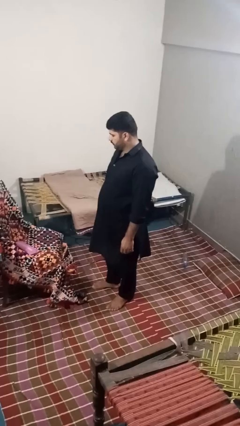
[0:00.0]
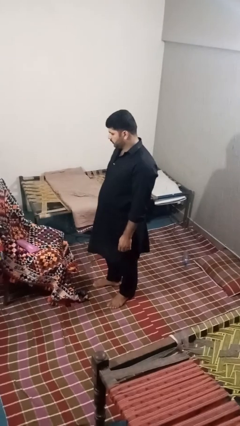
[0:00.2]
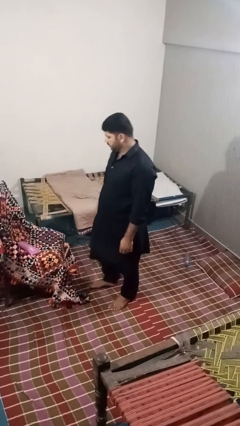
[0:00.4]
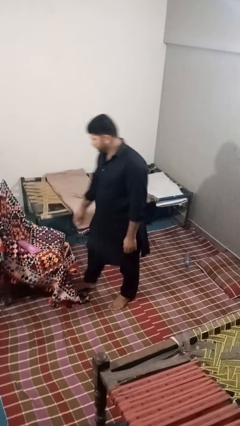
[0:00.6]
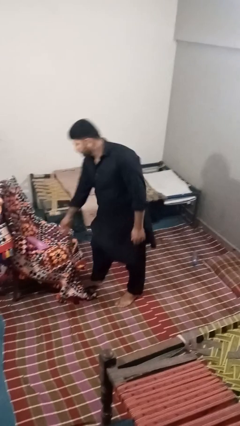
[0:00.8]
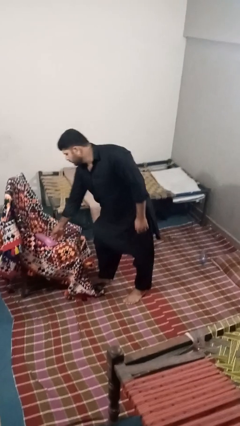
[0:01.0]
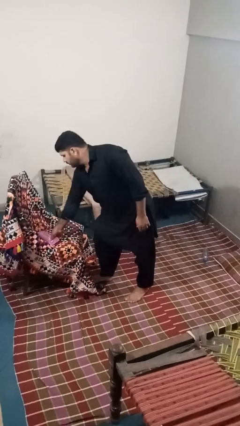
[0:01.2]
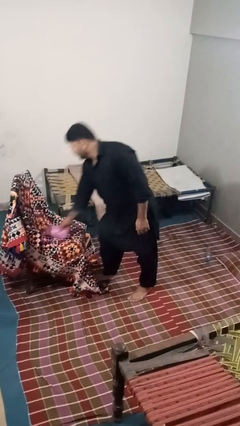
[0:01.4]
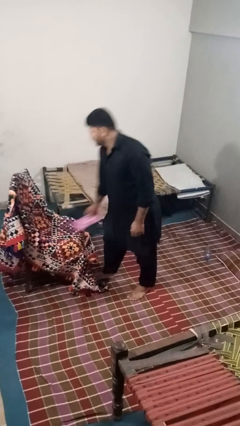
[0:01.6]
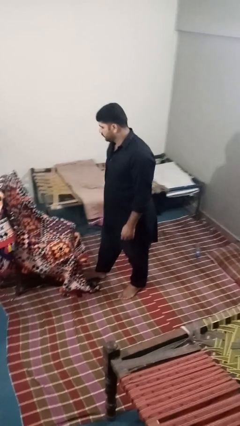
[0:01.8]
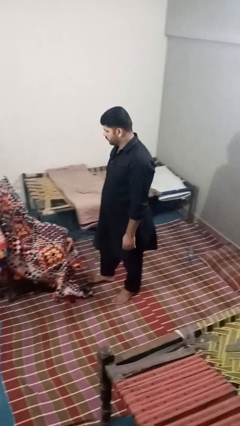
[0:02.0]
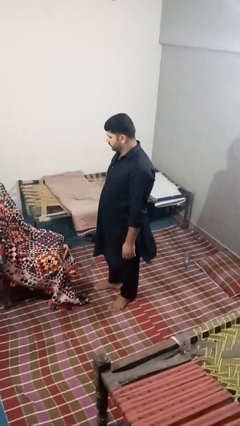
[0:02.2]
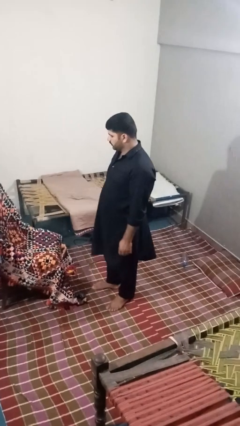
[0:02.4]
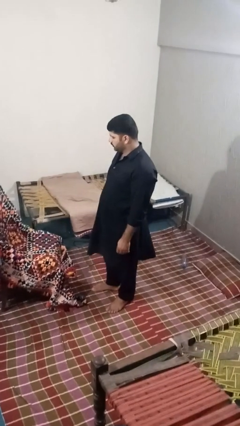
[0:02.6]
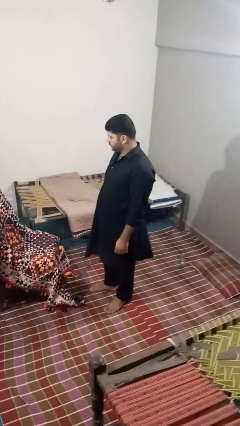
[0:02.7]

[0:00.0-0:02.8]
person picks up object from couch

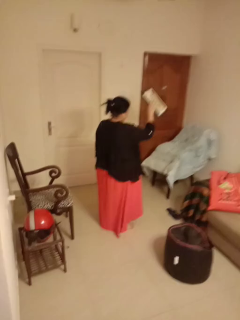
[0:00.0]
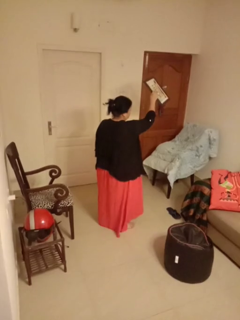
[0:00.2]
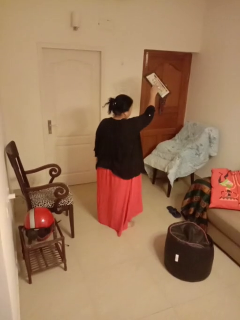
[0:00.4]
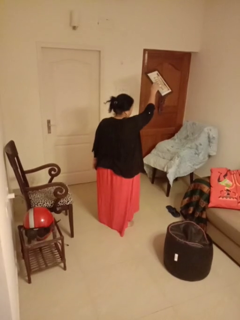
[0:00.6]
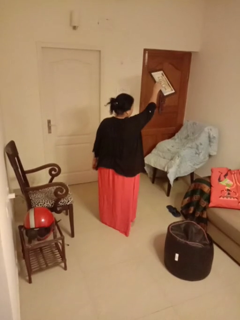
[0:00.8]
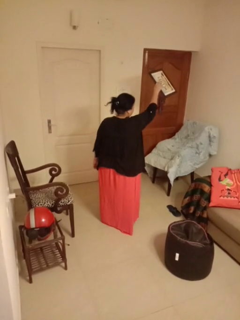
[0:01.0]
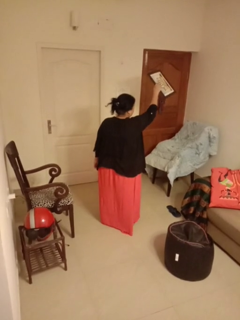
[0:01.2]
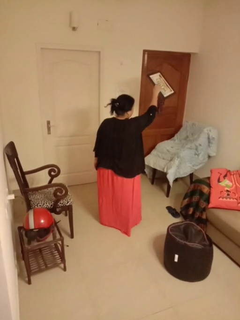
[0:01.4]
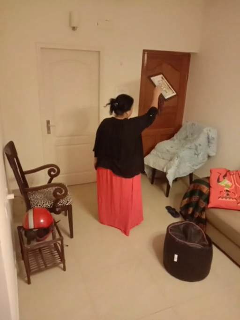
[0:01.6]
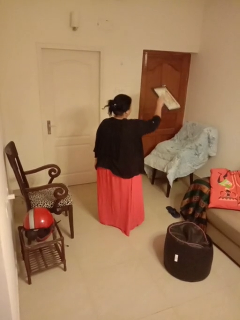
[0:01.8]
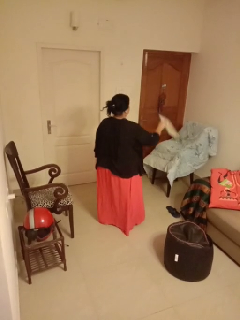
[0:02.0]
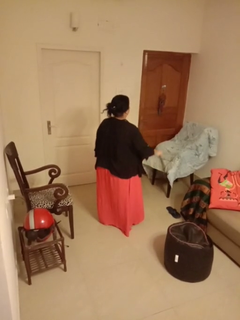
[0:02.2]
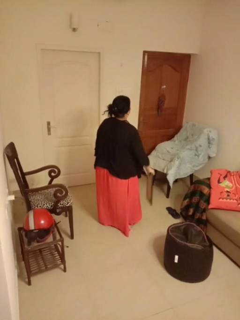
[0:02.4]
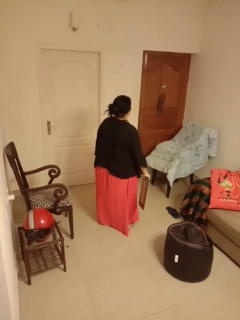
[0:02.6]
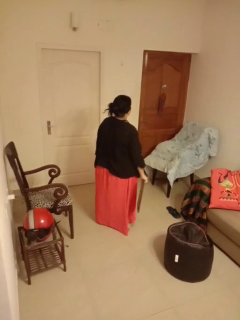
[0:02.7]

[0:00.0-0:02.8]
person holds object above head

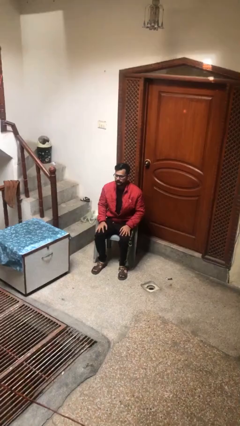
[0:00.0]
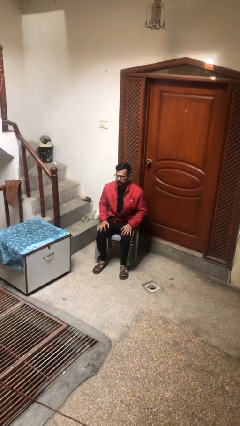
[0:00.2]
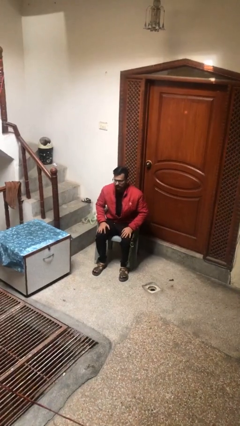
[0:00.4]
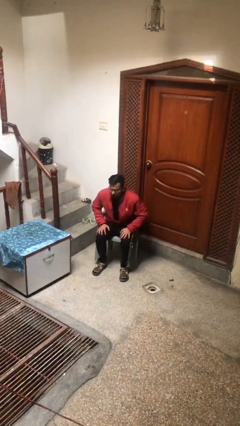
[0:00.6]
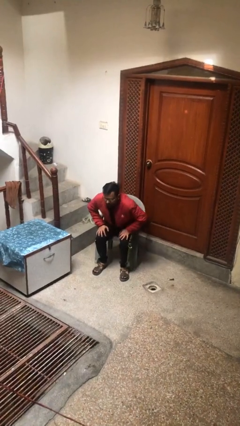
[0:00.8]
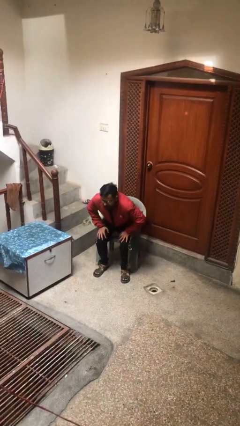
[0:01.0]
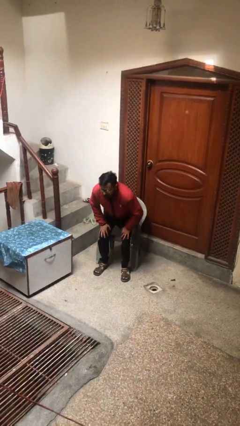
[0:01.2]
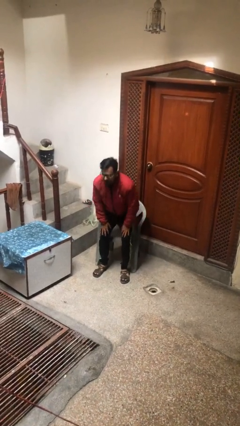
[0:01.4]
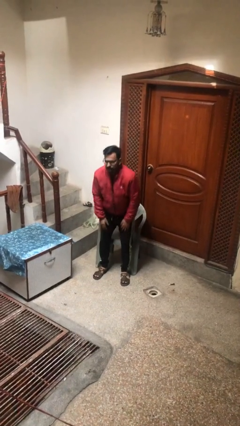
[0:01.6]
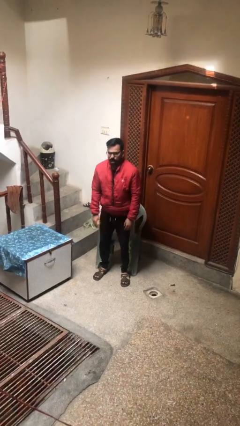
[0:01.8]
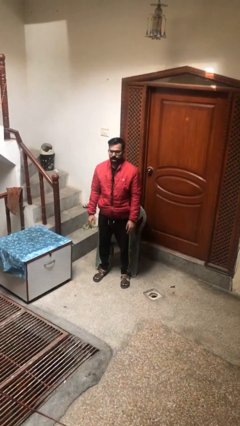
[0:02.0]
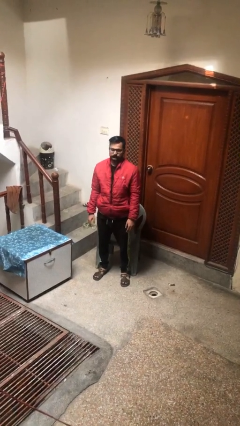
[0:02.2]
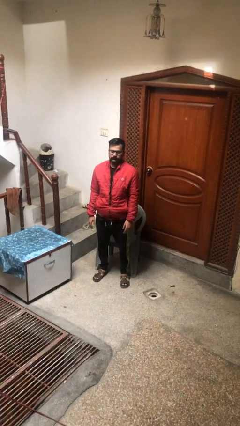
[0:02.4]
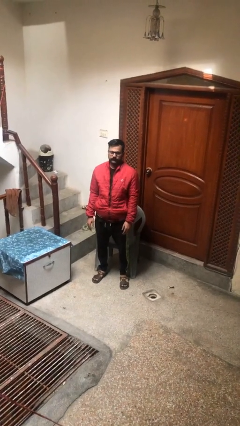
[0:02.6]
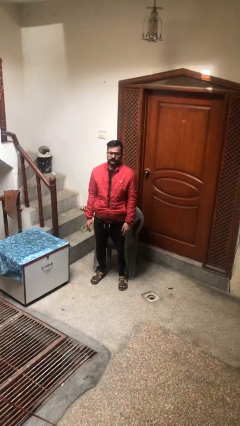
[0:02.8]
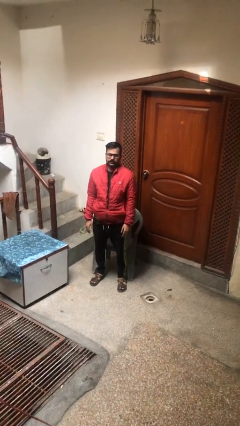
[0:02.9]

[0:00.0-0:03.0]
person stands up

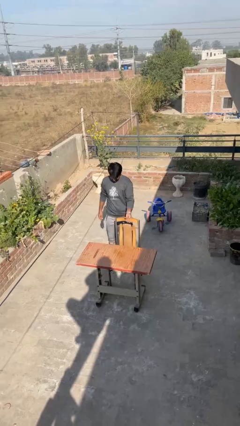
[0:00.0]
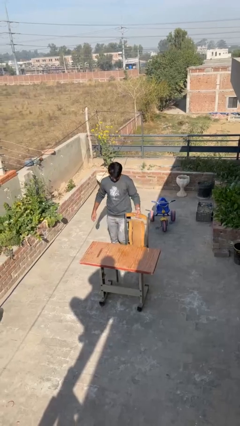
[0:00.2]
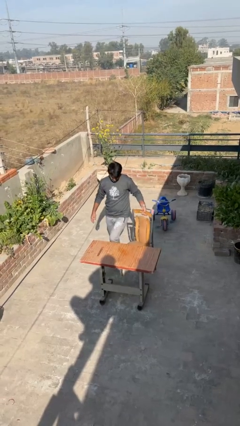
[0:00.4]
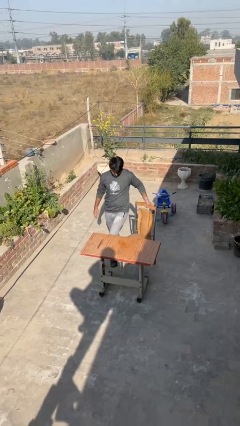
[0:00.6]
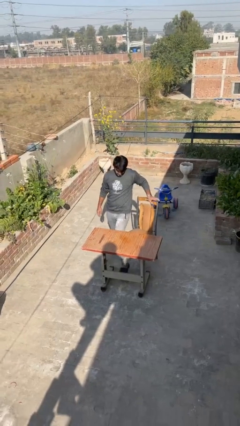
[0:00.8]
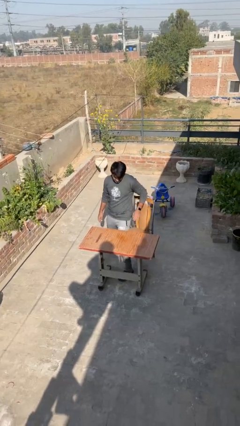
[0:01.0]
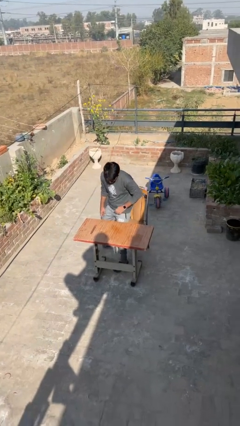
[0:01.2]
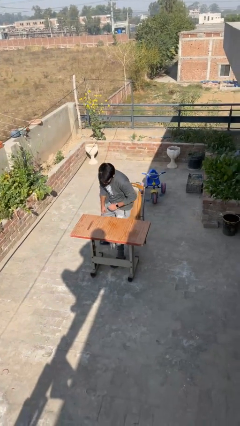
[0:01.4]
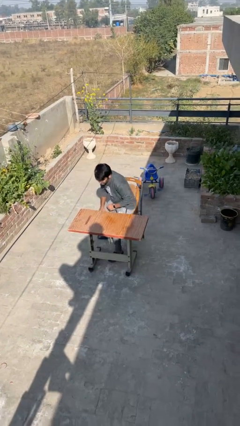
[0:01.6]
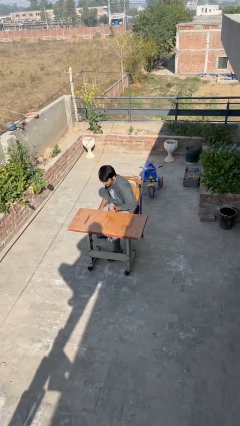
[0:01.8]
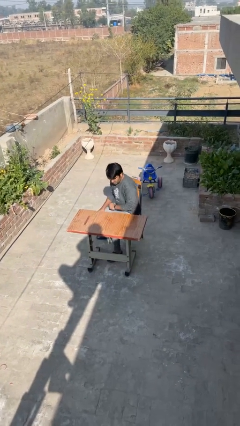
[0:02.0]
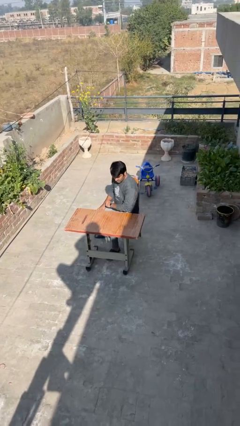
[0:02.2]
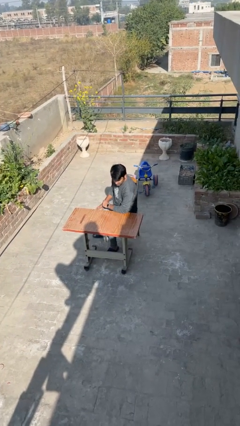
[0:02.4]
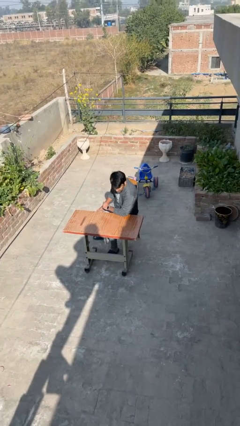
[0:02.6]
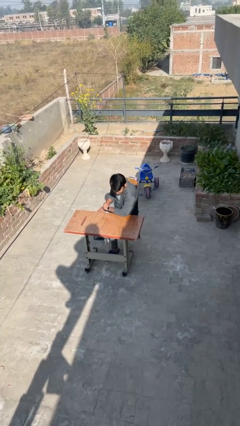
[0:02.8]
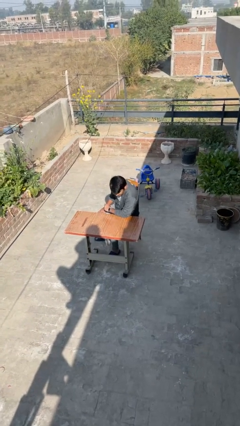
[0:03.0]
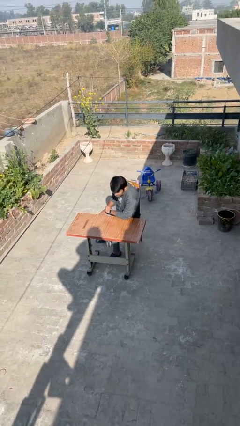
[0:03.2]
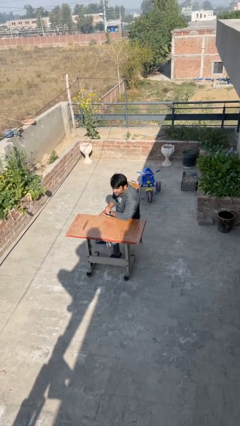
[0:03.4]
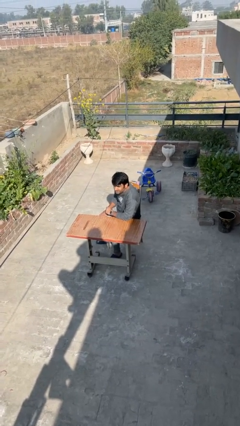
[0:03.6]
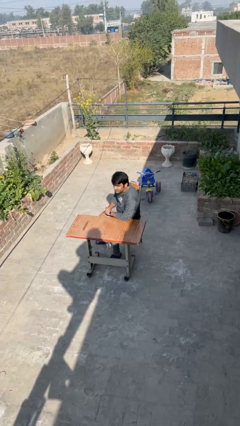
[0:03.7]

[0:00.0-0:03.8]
person sits down

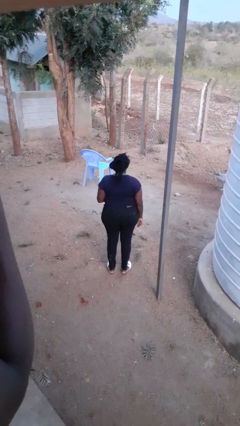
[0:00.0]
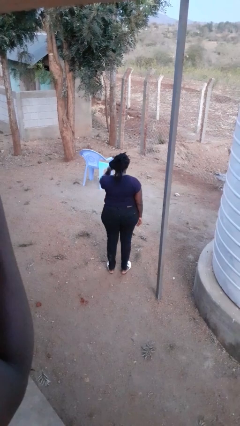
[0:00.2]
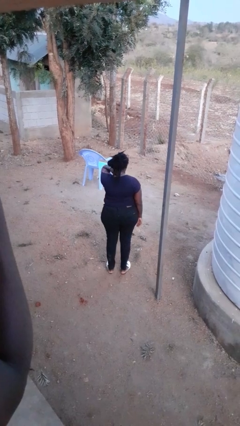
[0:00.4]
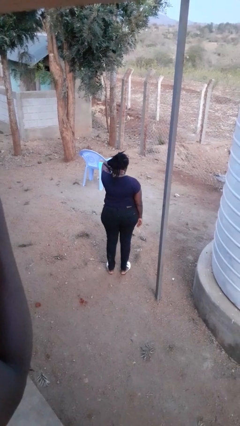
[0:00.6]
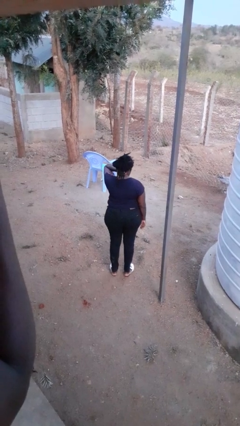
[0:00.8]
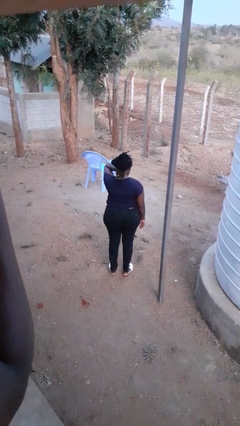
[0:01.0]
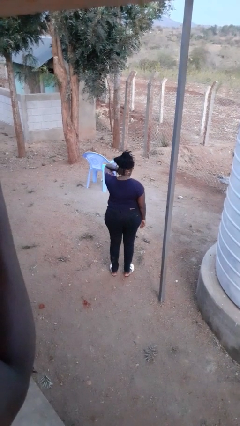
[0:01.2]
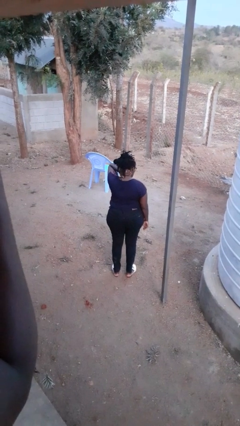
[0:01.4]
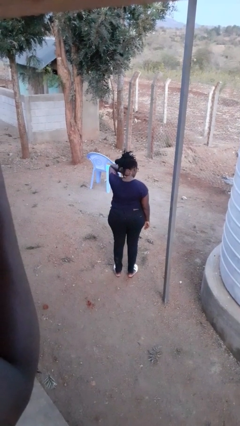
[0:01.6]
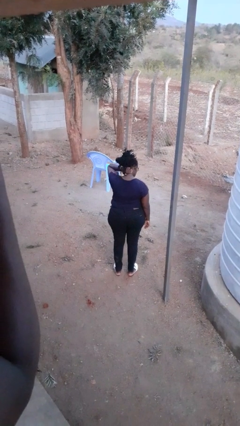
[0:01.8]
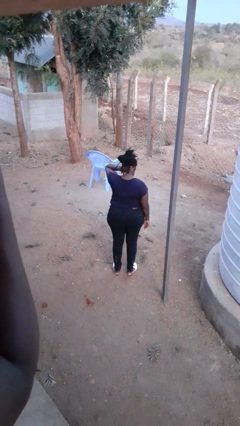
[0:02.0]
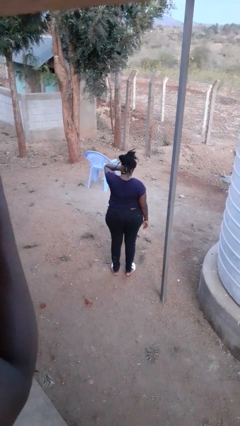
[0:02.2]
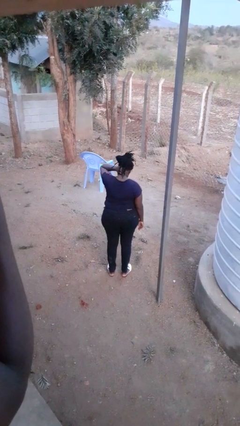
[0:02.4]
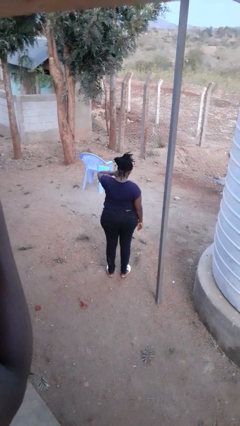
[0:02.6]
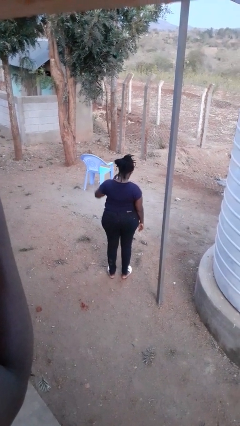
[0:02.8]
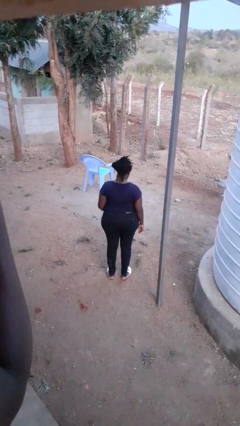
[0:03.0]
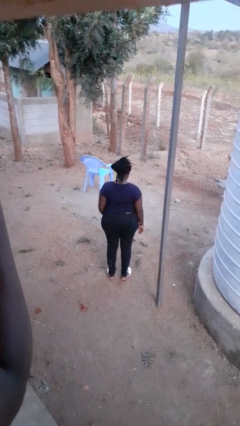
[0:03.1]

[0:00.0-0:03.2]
person rubs neck

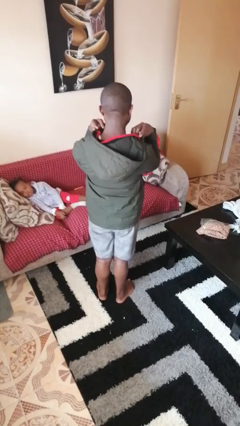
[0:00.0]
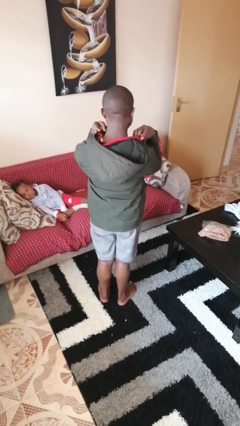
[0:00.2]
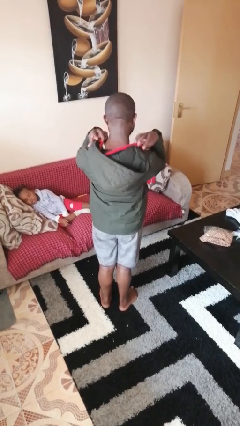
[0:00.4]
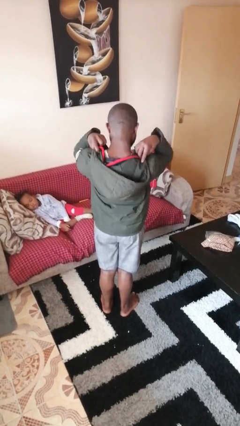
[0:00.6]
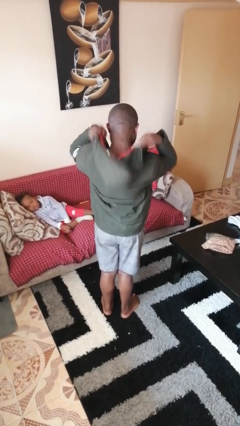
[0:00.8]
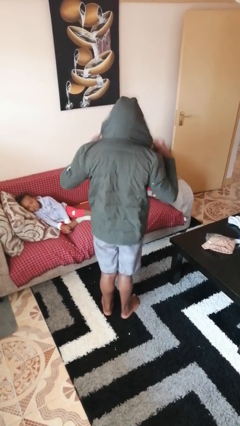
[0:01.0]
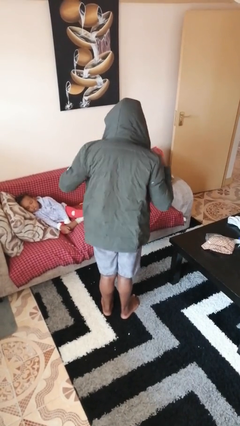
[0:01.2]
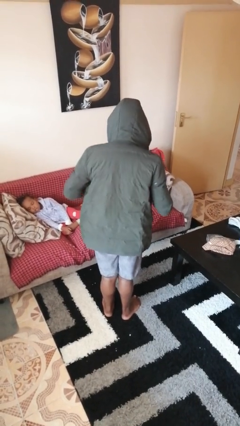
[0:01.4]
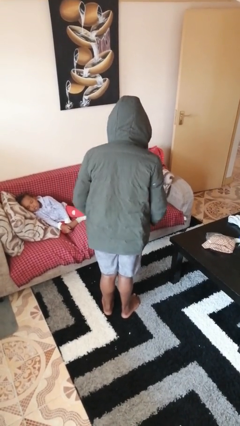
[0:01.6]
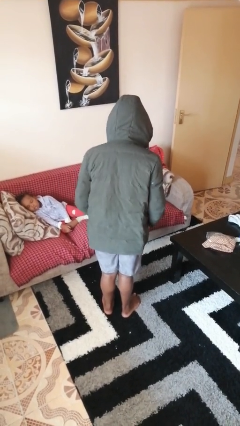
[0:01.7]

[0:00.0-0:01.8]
person puts on hoodie

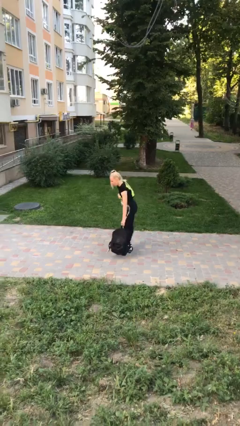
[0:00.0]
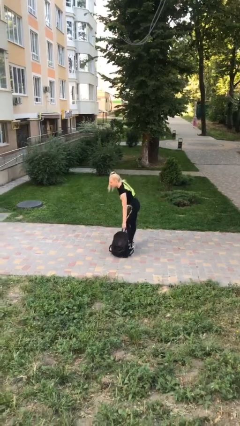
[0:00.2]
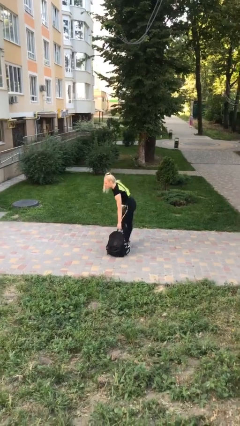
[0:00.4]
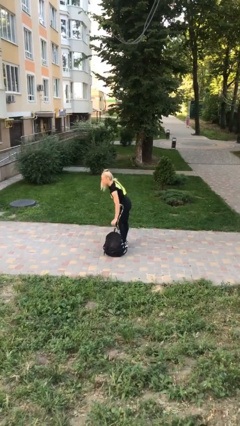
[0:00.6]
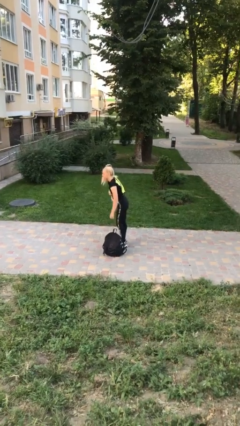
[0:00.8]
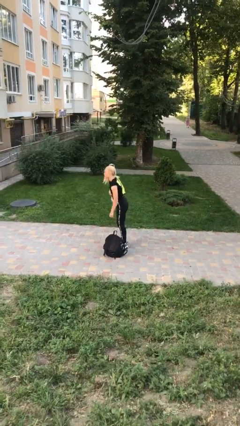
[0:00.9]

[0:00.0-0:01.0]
person puts down object on floor
